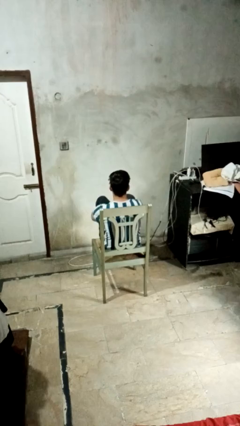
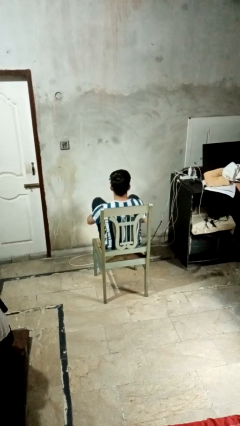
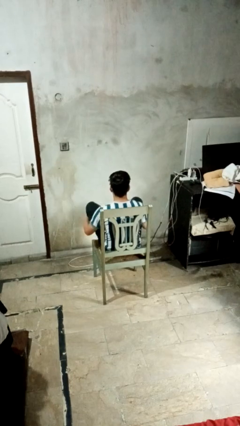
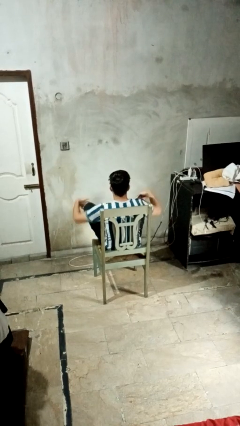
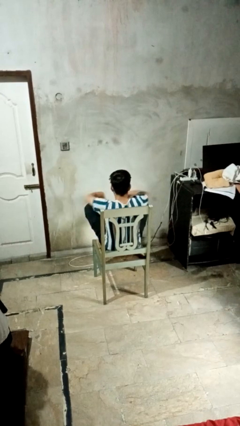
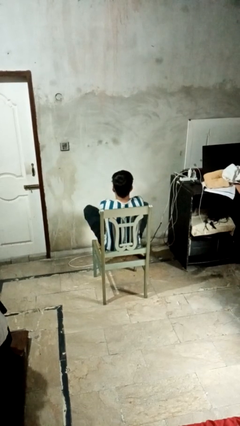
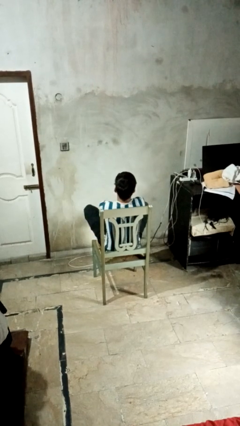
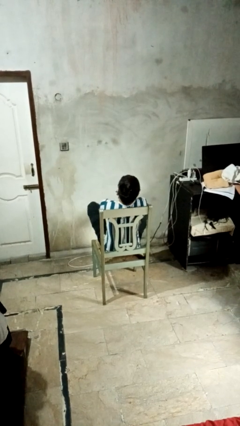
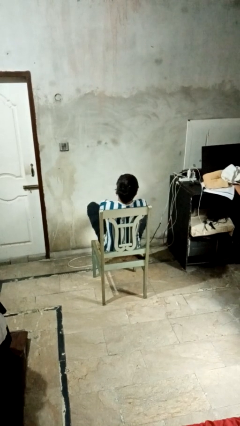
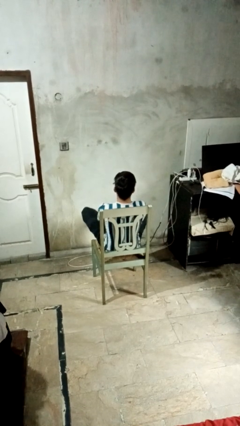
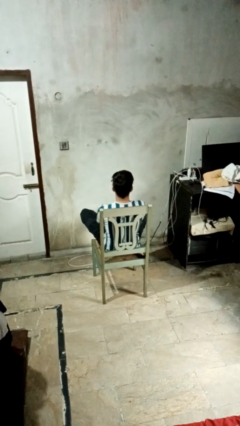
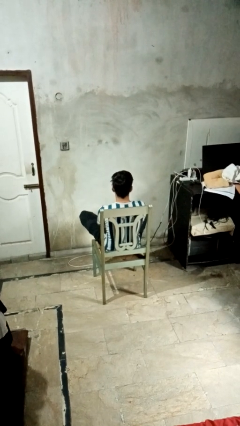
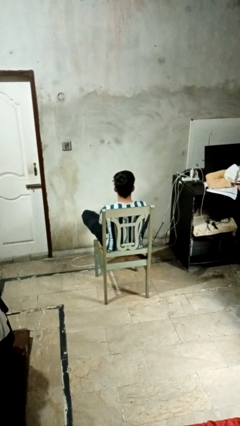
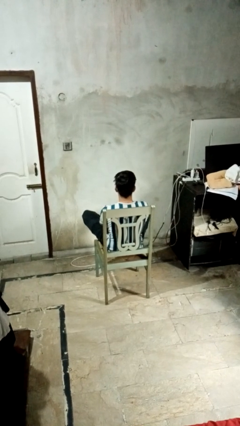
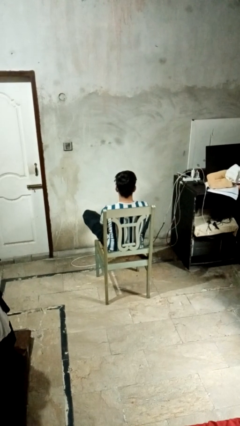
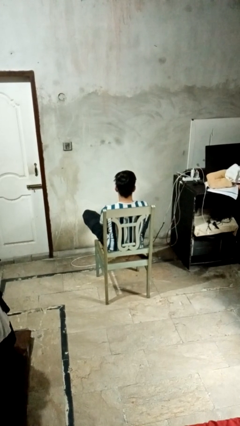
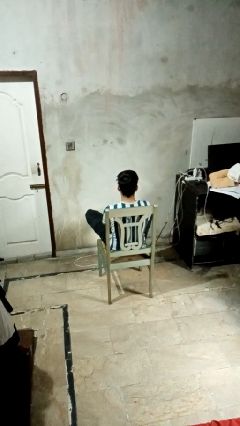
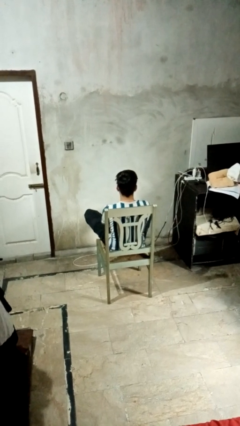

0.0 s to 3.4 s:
person crosses legs

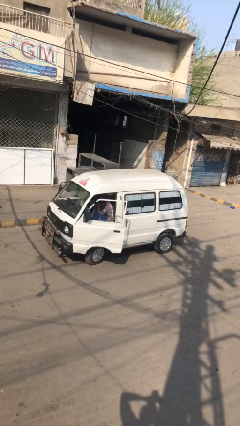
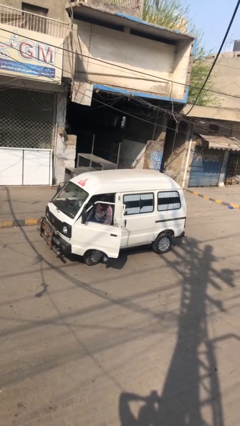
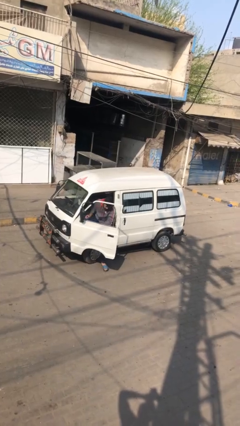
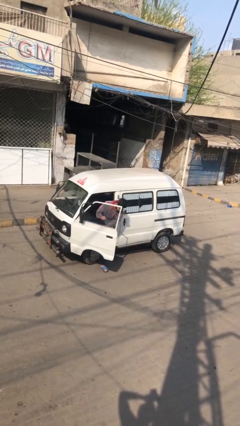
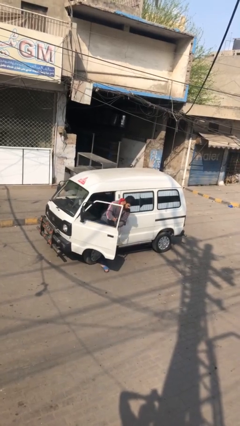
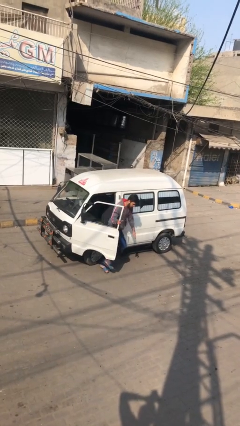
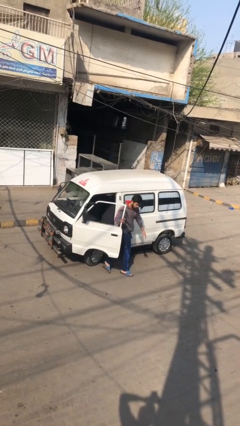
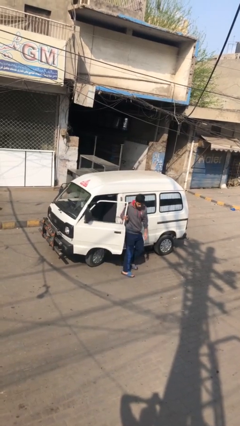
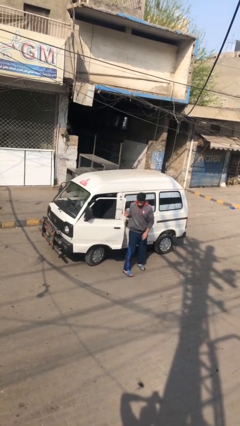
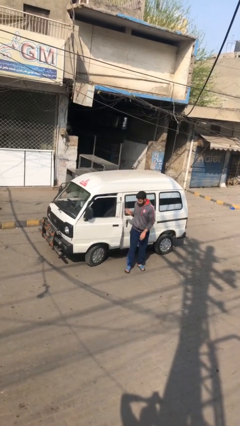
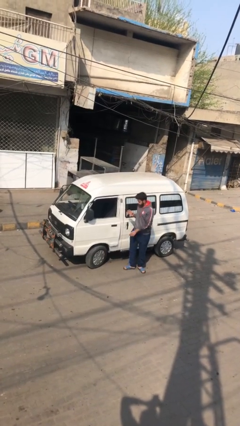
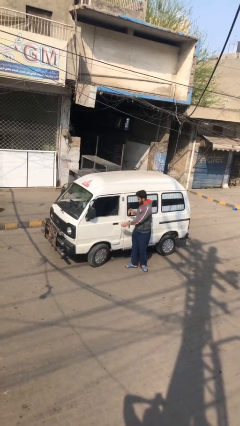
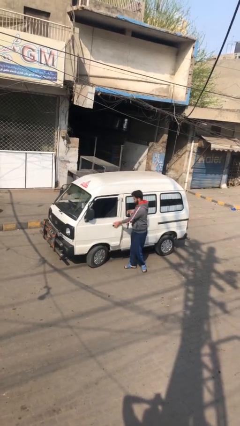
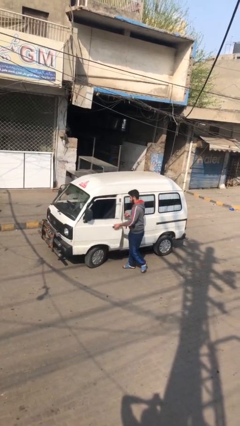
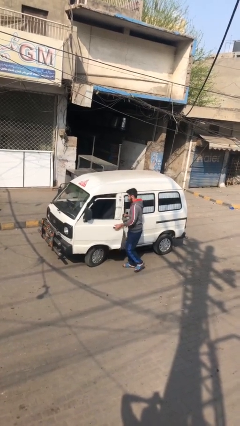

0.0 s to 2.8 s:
car drops off person

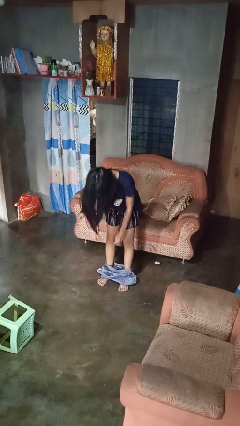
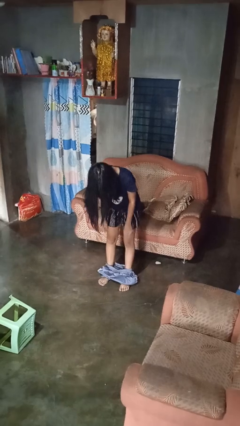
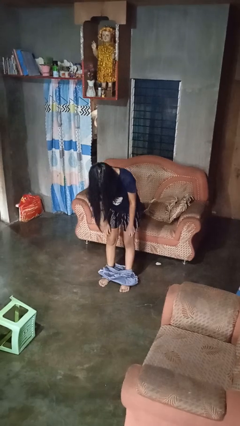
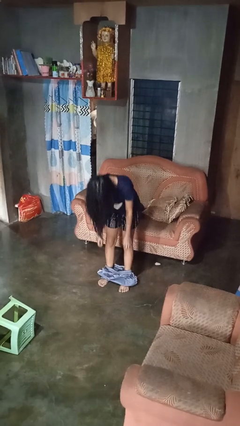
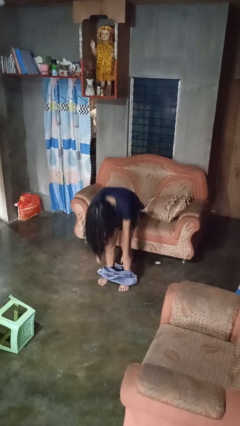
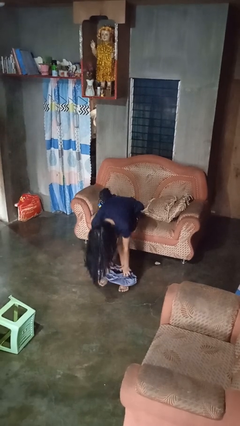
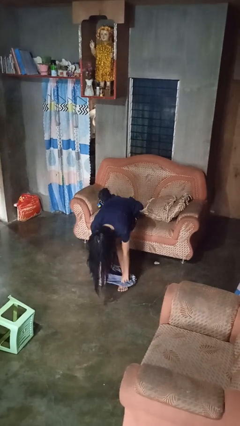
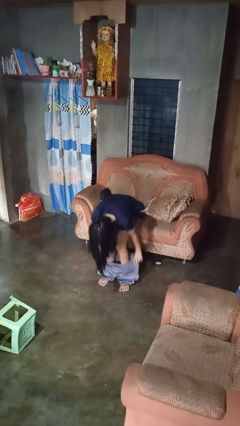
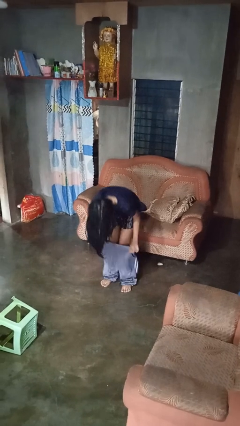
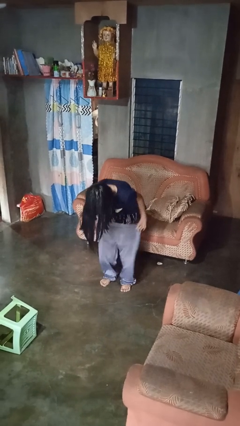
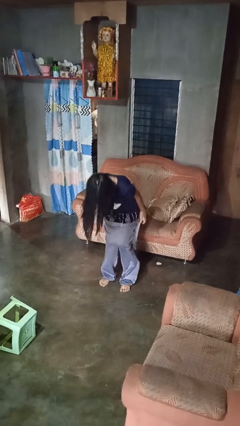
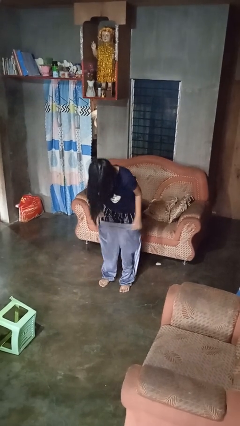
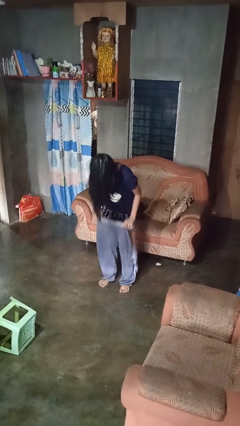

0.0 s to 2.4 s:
person puts on pants

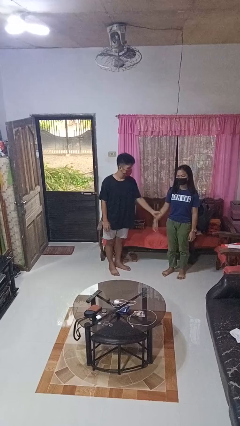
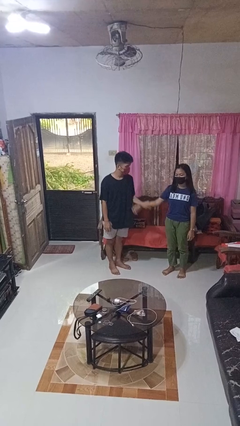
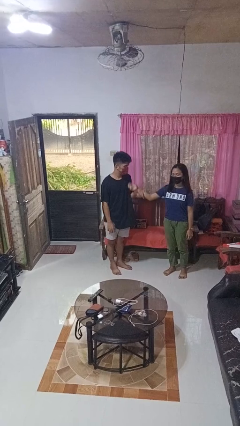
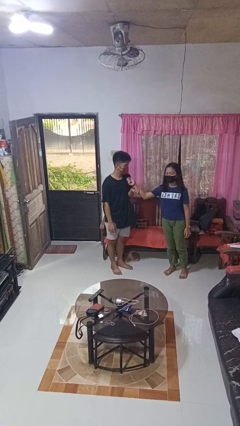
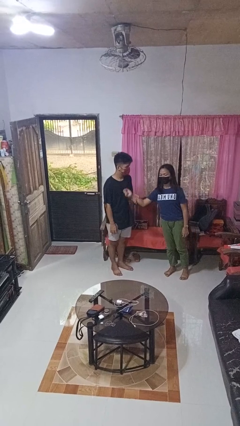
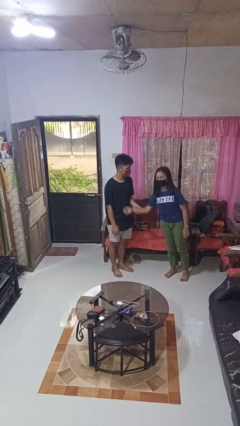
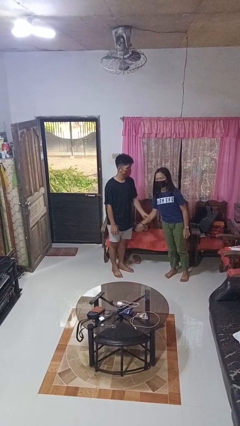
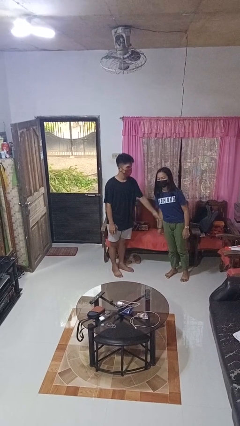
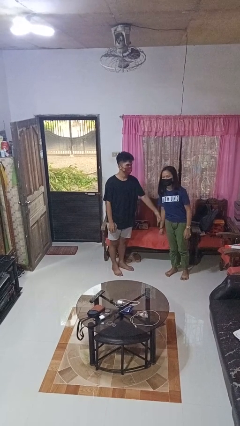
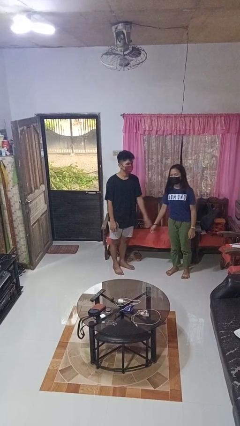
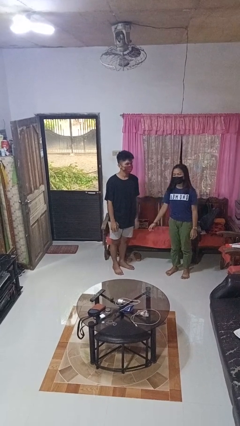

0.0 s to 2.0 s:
person grabs person by forearm

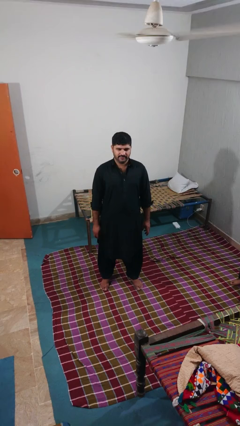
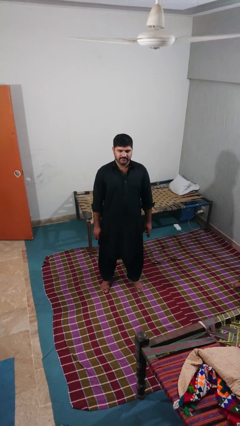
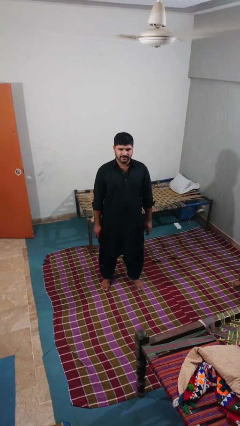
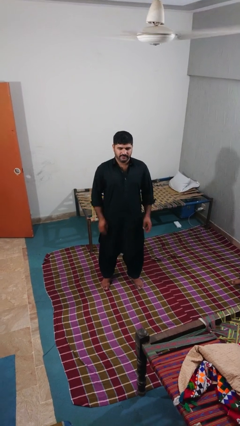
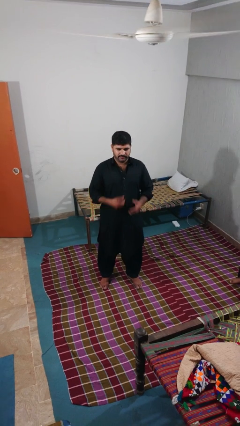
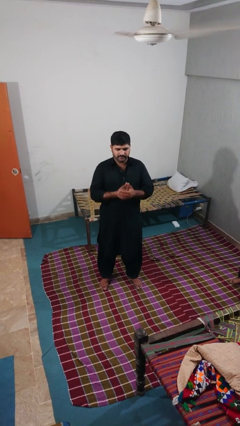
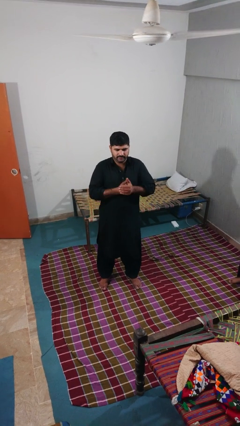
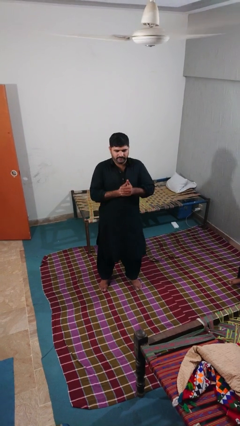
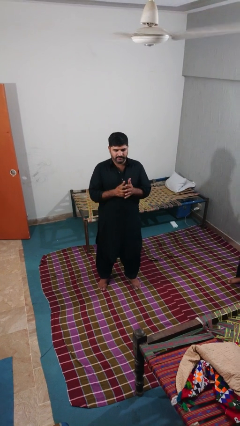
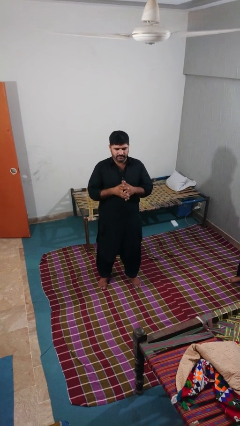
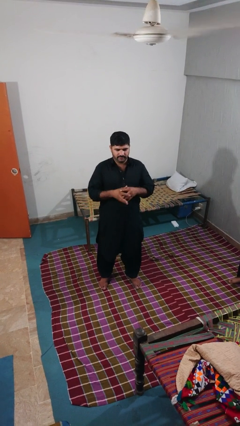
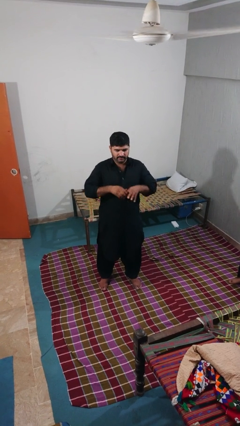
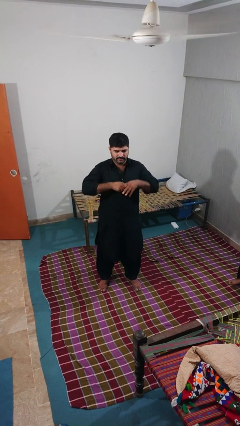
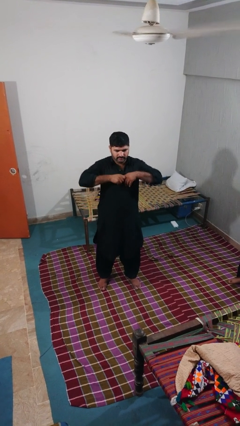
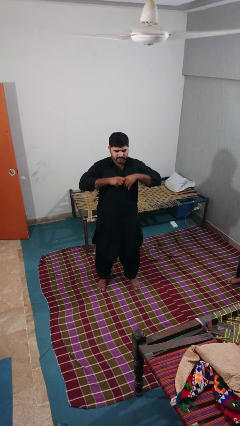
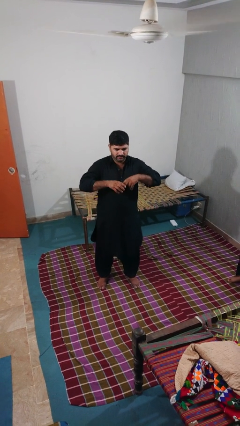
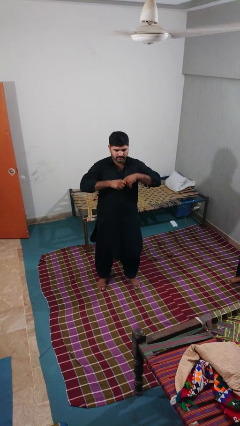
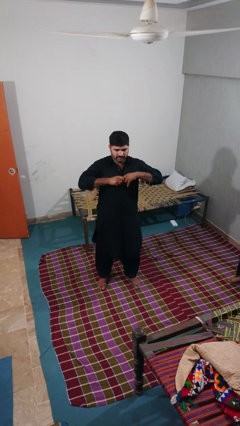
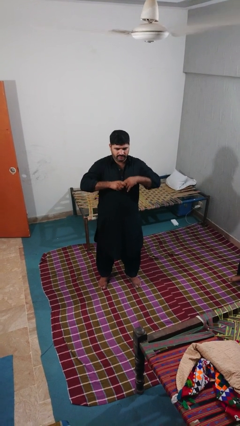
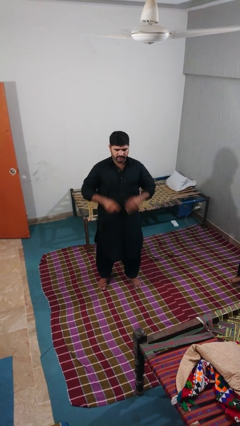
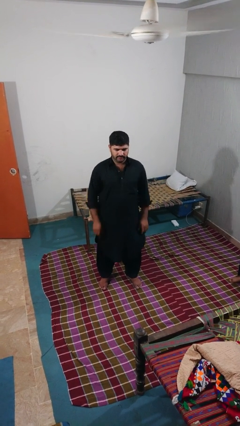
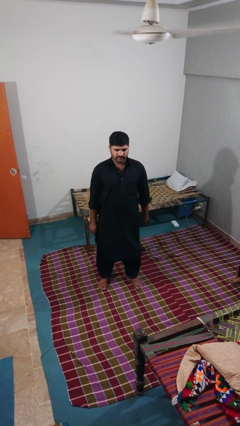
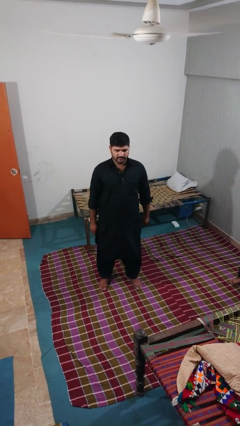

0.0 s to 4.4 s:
person cracks knuckles

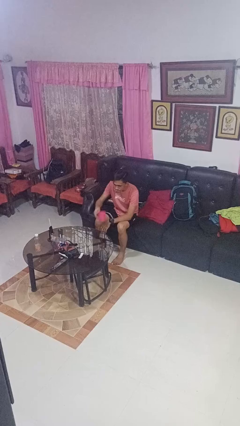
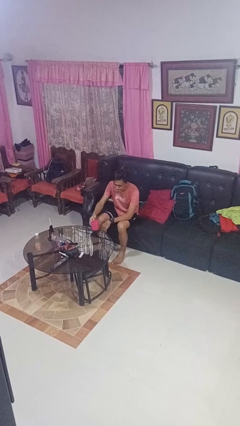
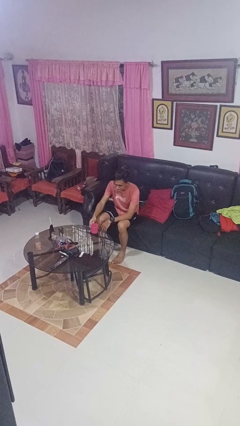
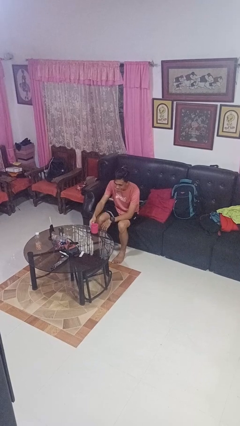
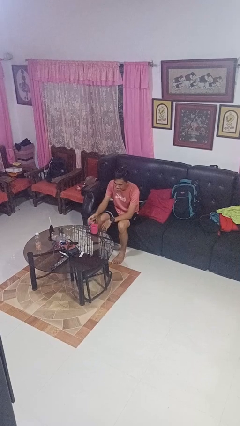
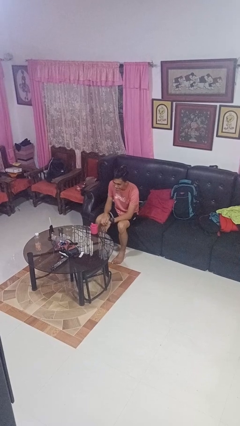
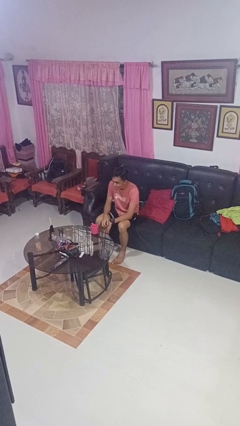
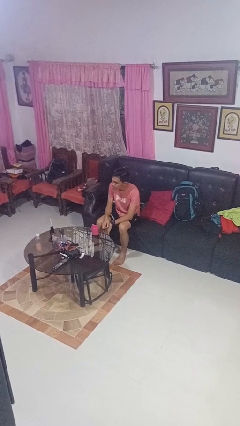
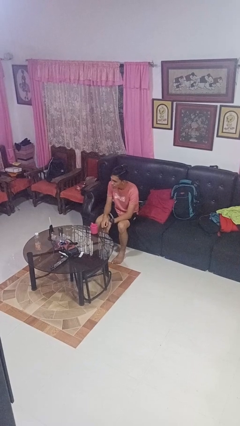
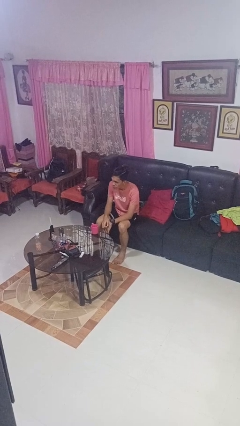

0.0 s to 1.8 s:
person puts down object on table

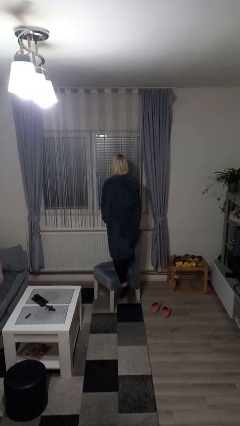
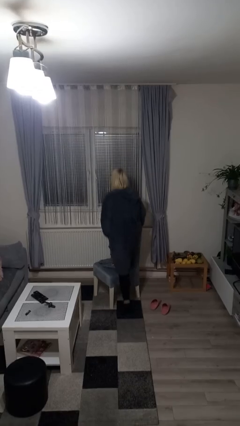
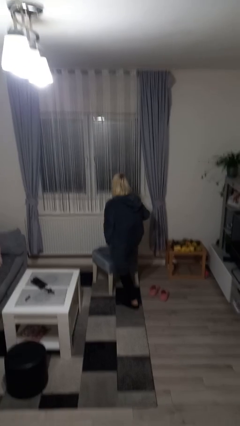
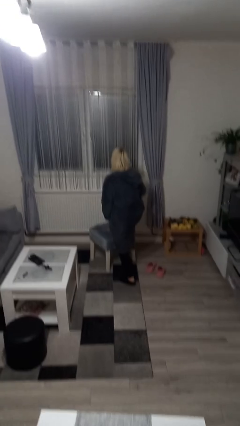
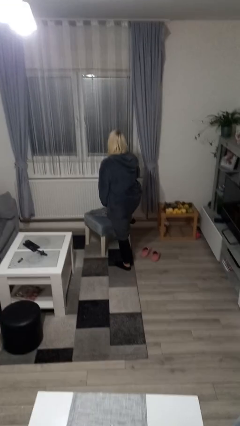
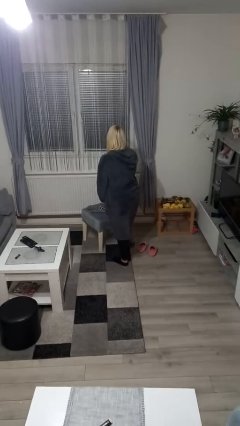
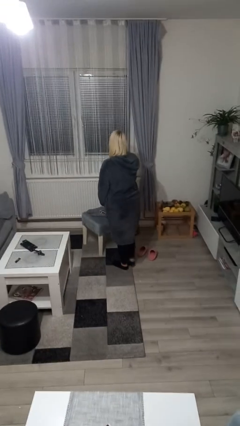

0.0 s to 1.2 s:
person climbs off chair
